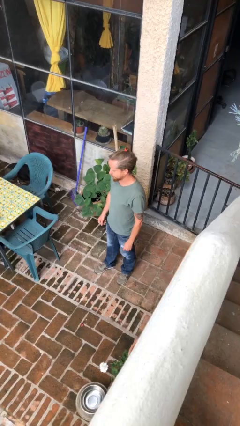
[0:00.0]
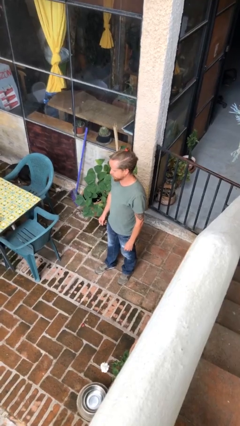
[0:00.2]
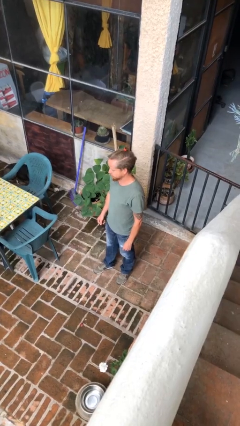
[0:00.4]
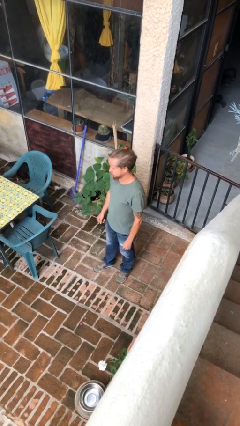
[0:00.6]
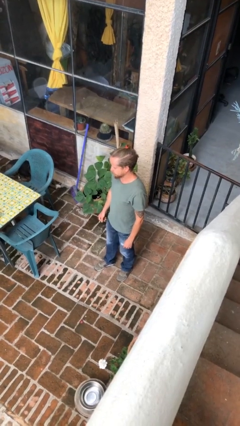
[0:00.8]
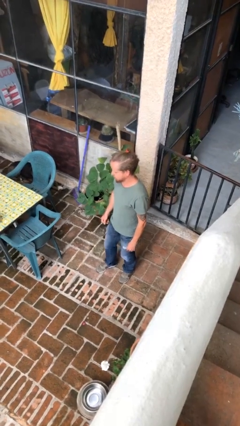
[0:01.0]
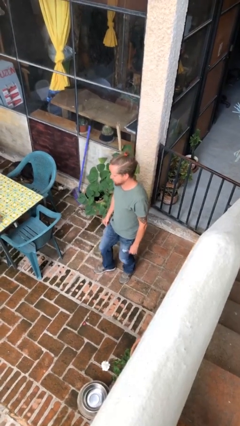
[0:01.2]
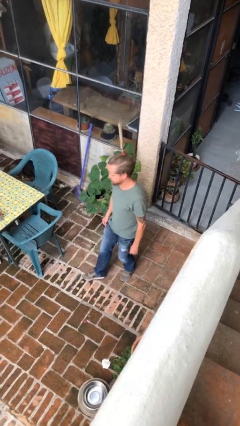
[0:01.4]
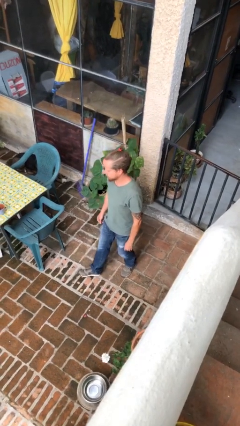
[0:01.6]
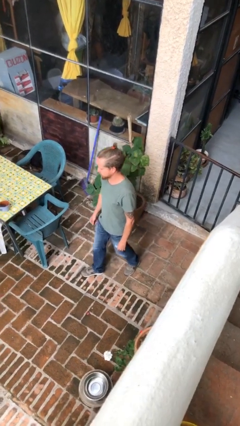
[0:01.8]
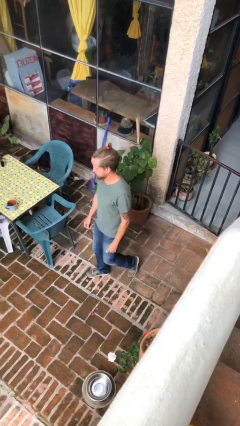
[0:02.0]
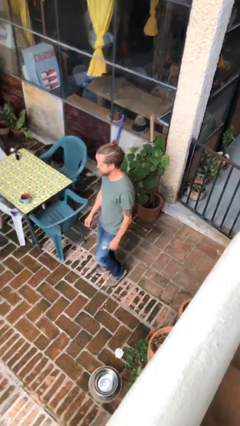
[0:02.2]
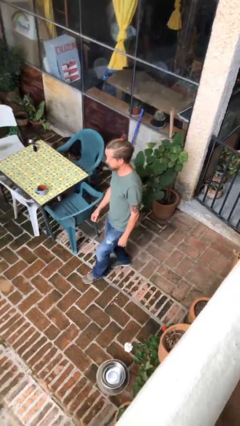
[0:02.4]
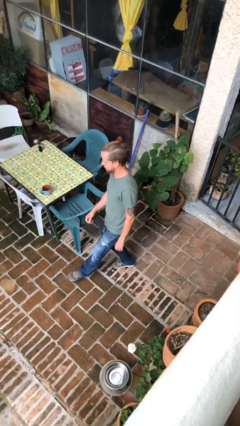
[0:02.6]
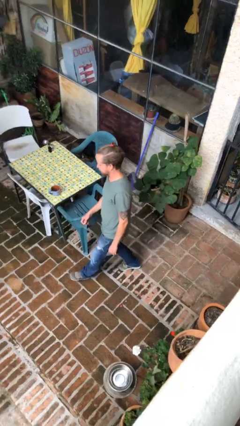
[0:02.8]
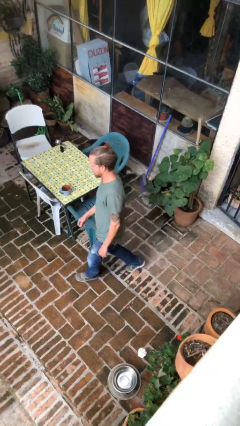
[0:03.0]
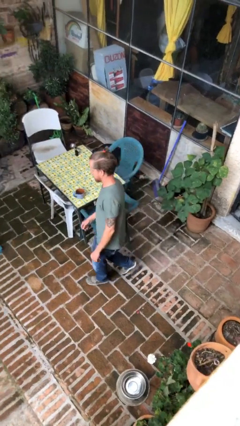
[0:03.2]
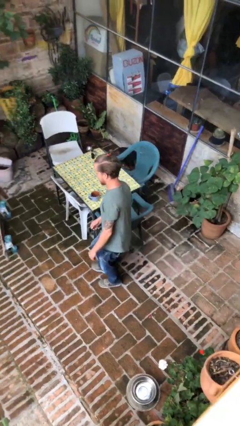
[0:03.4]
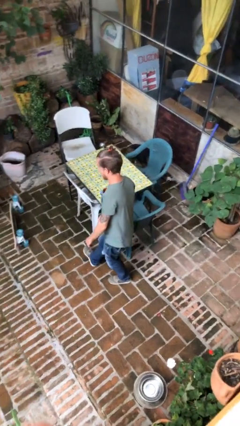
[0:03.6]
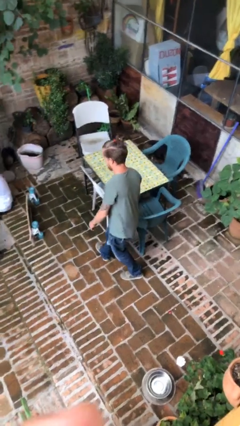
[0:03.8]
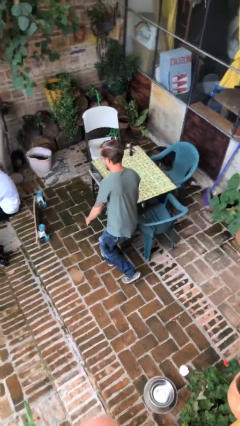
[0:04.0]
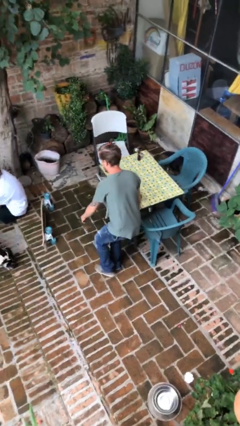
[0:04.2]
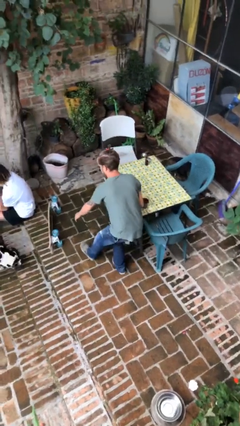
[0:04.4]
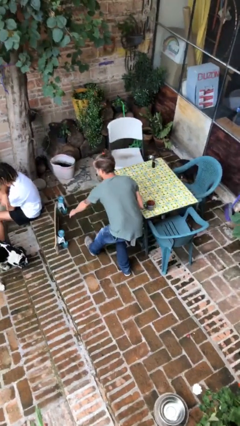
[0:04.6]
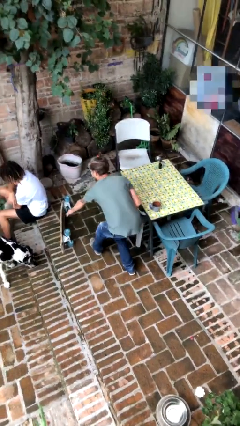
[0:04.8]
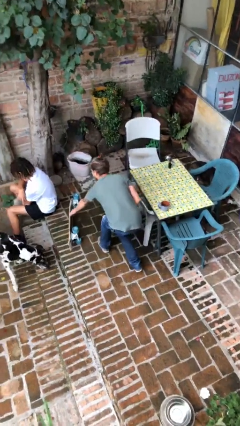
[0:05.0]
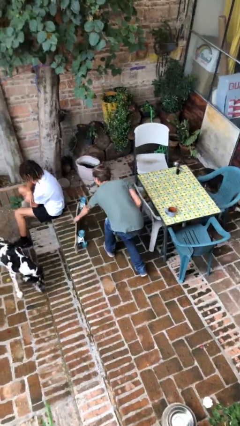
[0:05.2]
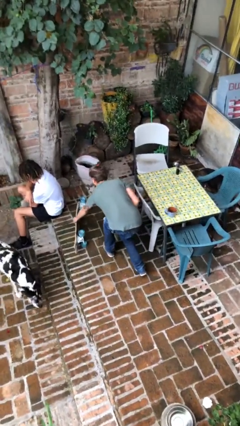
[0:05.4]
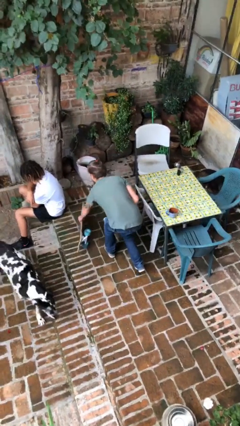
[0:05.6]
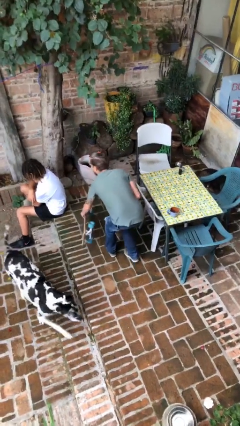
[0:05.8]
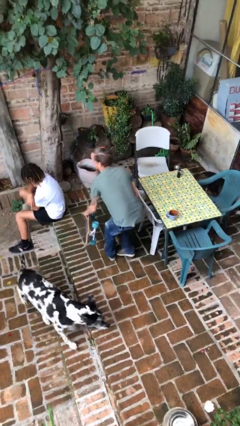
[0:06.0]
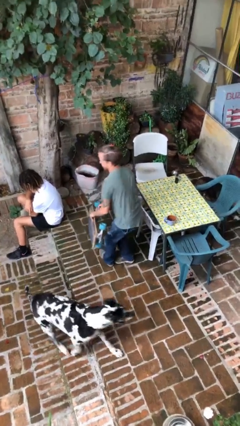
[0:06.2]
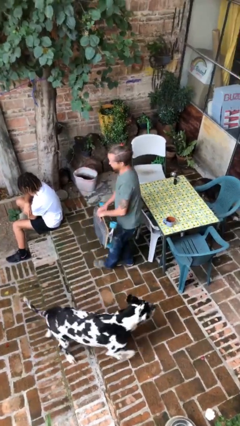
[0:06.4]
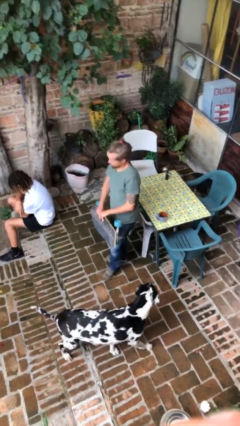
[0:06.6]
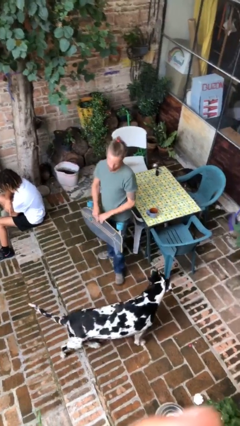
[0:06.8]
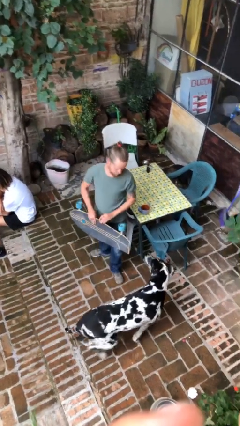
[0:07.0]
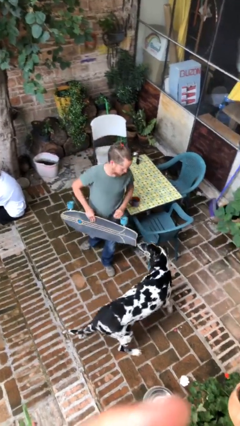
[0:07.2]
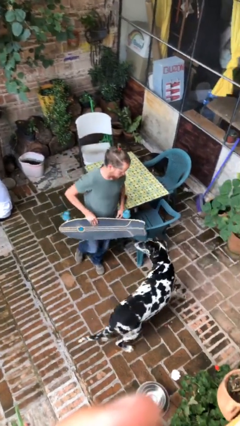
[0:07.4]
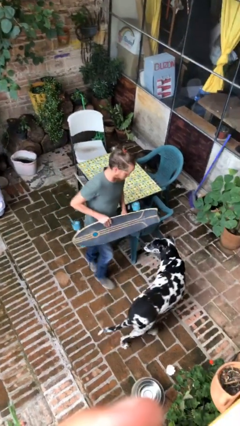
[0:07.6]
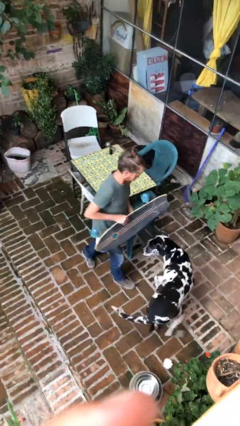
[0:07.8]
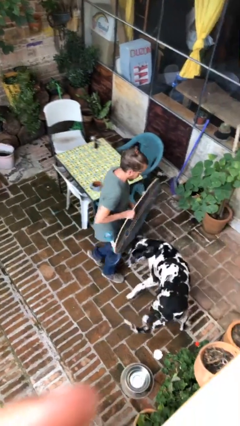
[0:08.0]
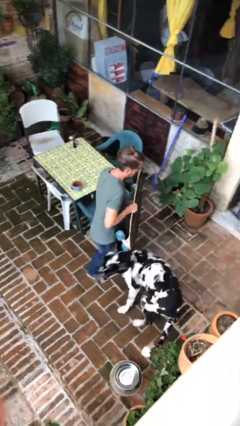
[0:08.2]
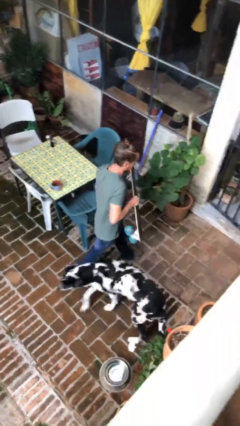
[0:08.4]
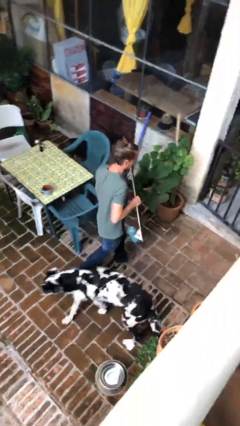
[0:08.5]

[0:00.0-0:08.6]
person steals object from person

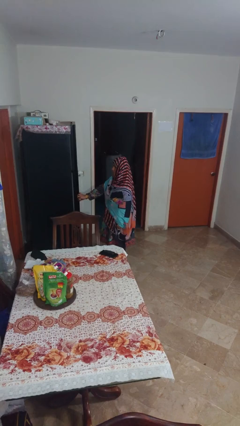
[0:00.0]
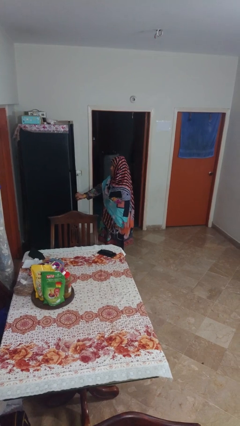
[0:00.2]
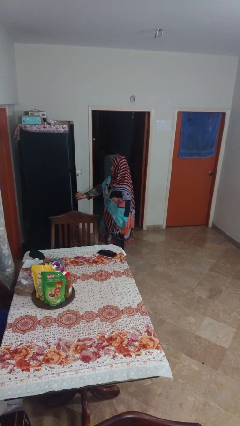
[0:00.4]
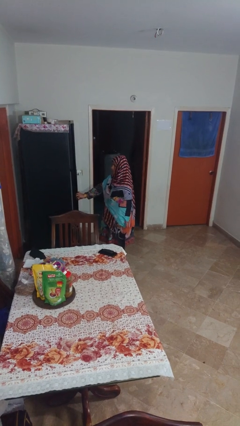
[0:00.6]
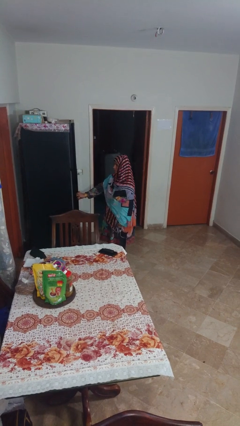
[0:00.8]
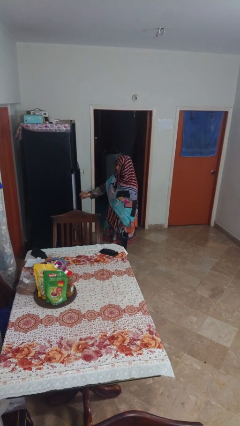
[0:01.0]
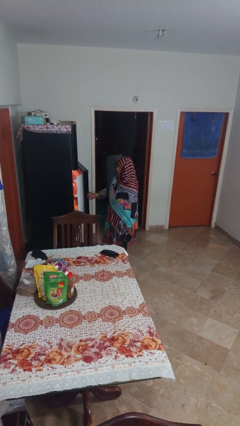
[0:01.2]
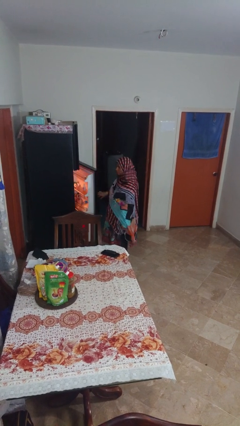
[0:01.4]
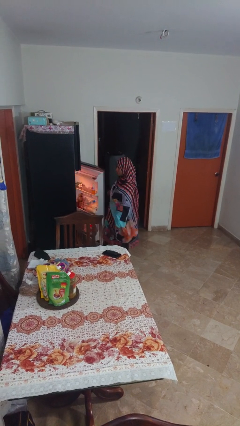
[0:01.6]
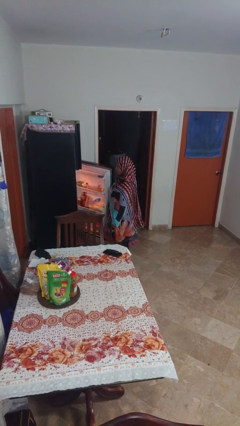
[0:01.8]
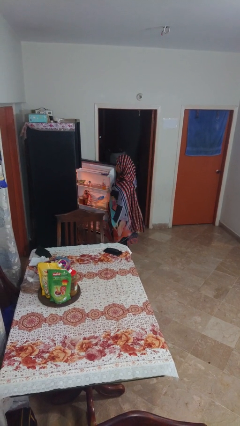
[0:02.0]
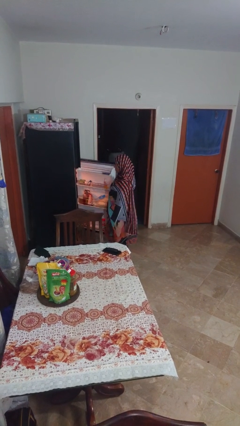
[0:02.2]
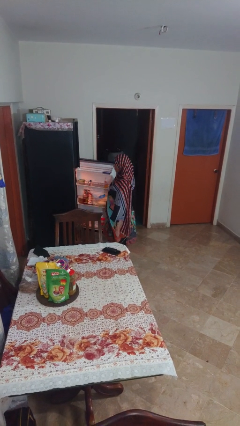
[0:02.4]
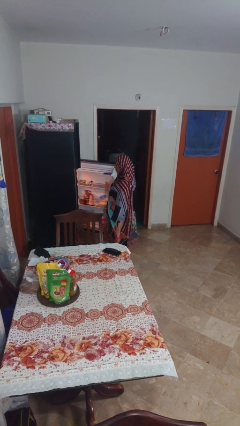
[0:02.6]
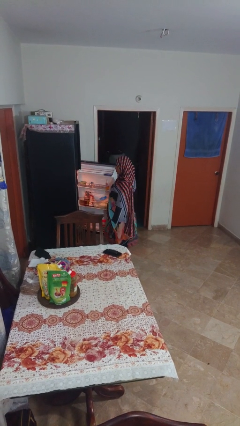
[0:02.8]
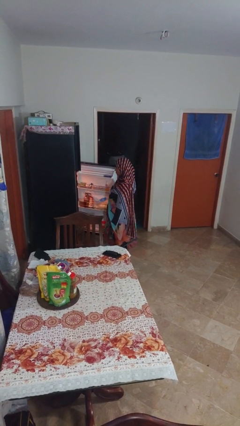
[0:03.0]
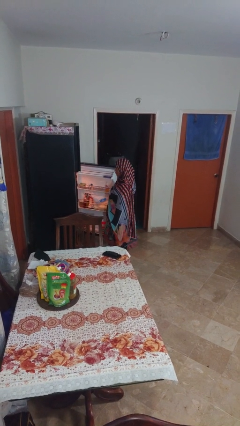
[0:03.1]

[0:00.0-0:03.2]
person opens refrigerator

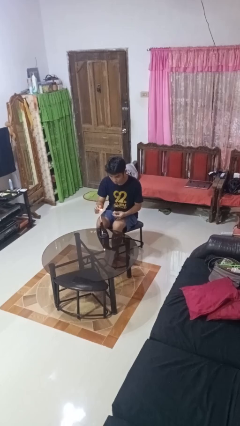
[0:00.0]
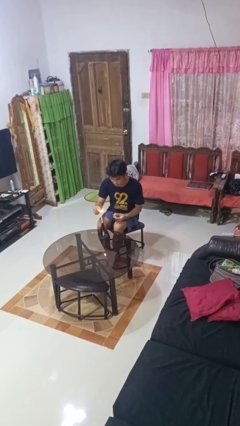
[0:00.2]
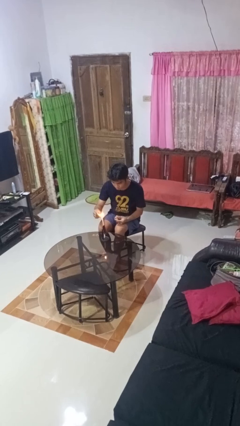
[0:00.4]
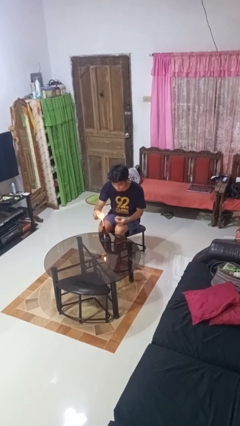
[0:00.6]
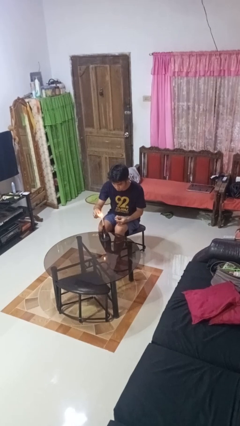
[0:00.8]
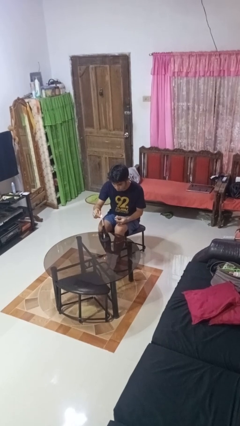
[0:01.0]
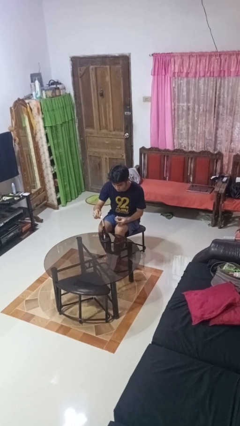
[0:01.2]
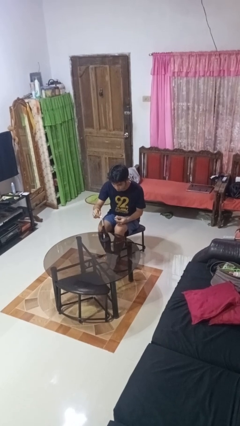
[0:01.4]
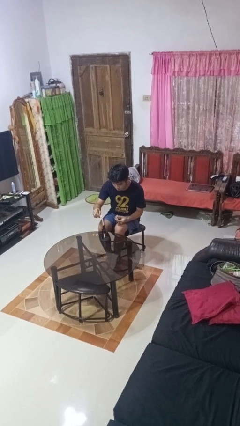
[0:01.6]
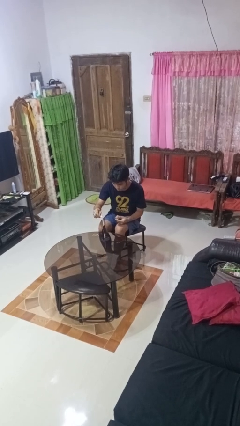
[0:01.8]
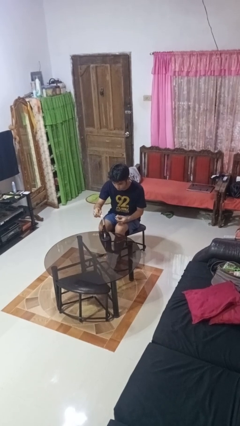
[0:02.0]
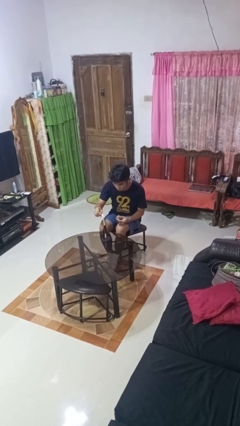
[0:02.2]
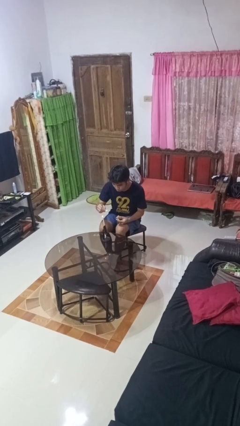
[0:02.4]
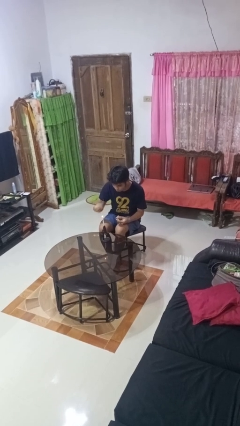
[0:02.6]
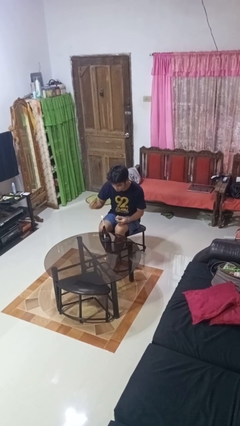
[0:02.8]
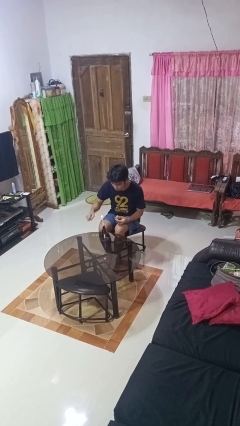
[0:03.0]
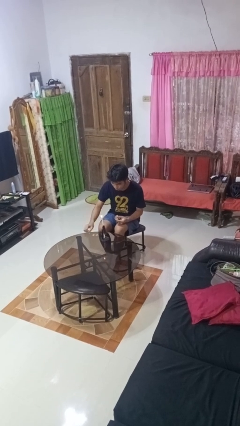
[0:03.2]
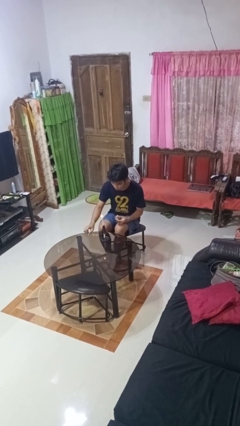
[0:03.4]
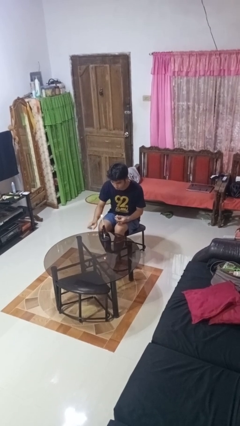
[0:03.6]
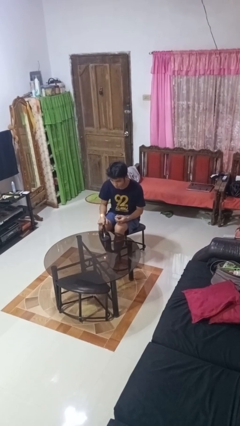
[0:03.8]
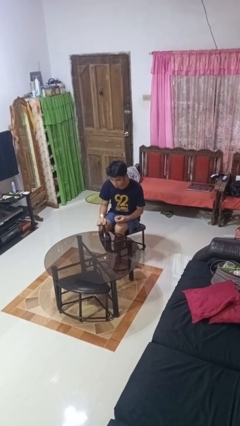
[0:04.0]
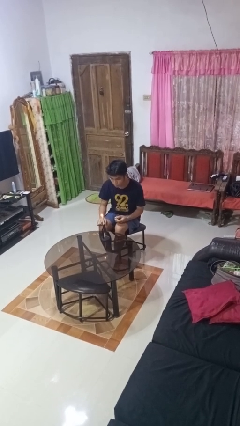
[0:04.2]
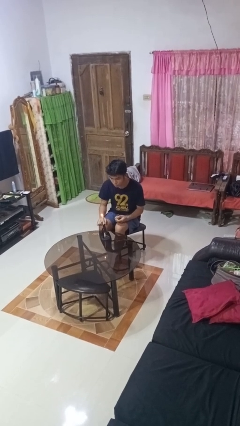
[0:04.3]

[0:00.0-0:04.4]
person lights candle

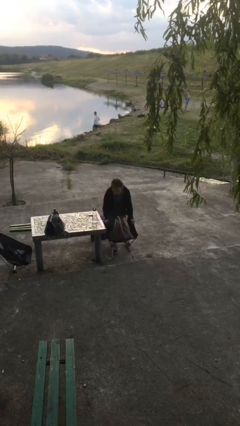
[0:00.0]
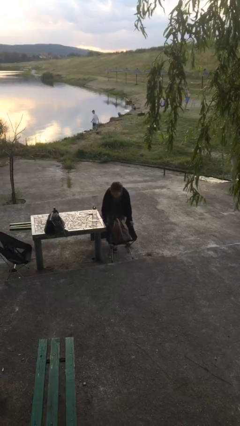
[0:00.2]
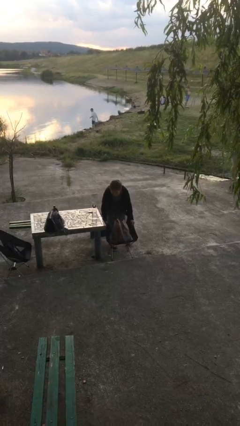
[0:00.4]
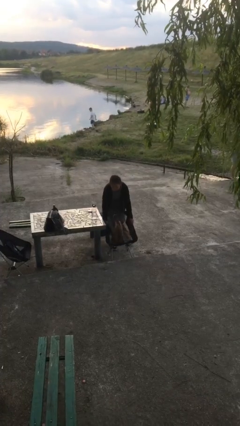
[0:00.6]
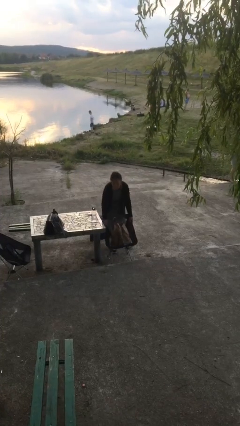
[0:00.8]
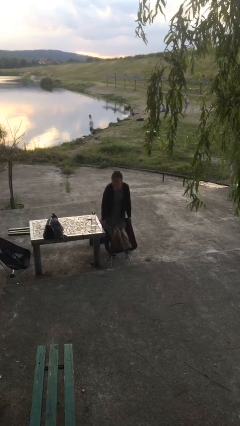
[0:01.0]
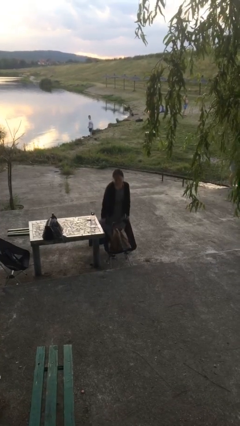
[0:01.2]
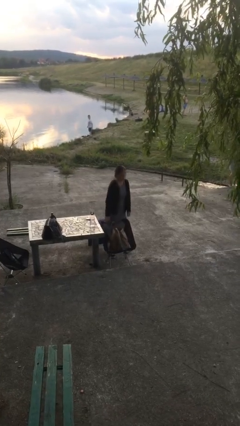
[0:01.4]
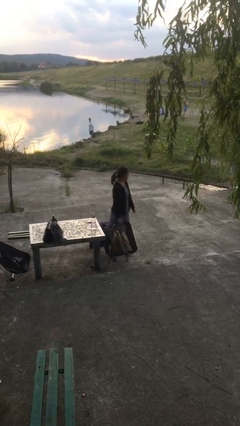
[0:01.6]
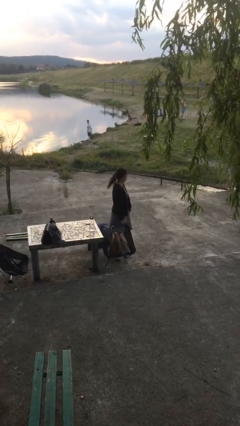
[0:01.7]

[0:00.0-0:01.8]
person puts down object on floor
